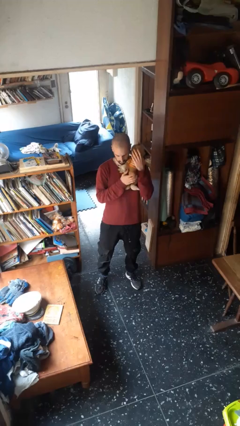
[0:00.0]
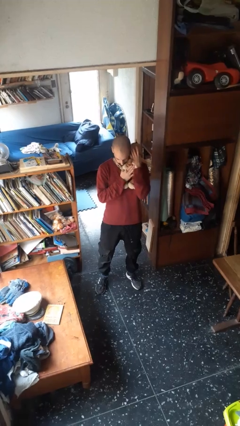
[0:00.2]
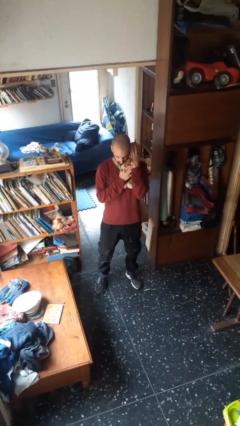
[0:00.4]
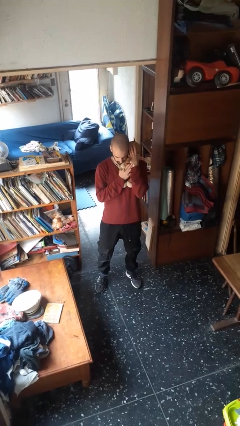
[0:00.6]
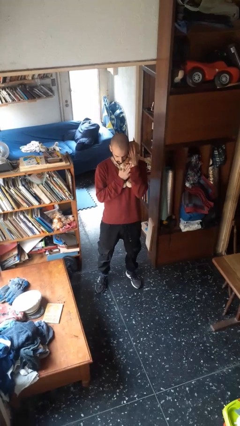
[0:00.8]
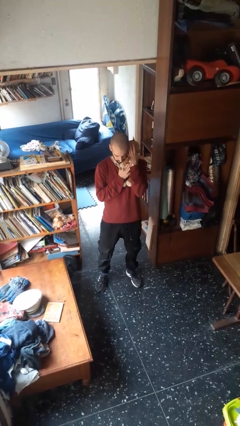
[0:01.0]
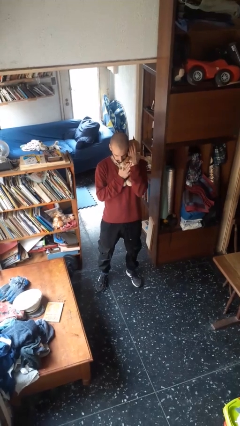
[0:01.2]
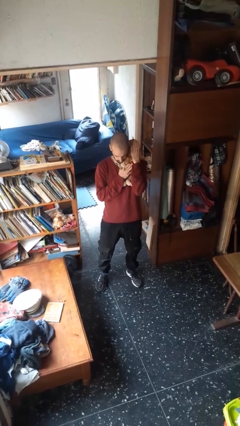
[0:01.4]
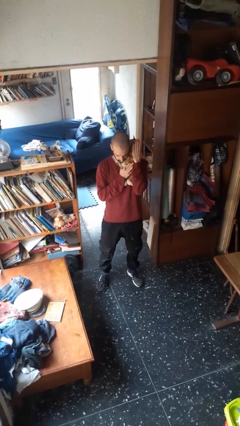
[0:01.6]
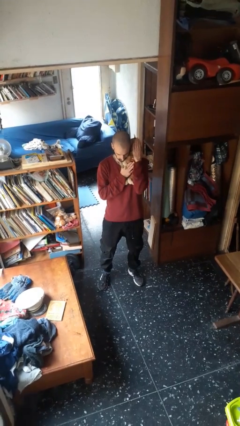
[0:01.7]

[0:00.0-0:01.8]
person hugs stuffed animal

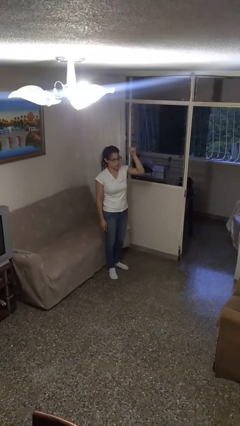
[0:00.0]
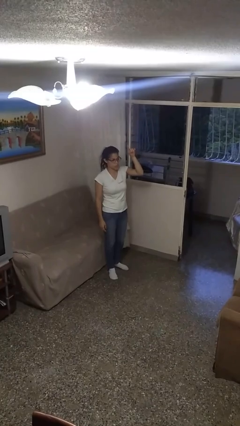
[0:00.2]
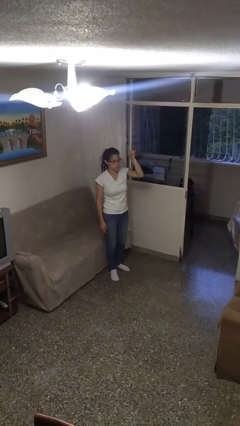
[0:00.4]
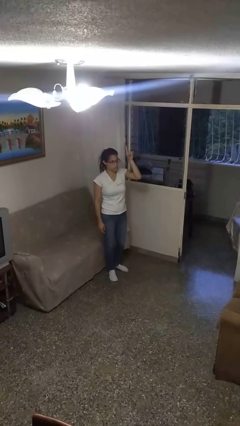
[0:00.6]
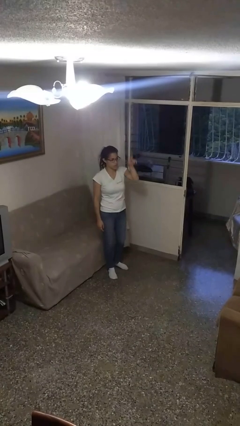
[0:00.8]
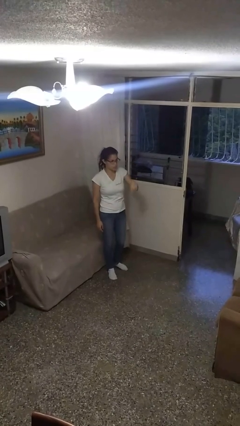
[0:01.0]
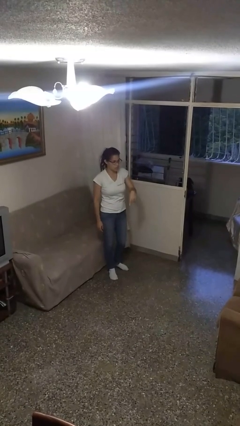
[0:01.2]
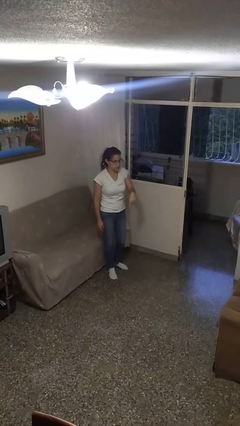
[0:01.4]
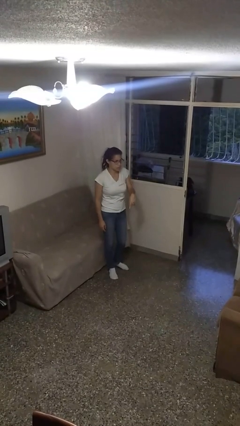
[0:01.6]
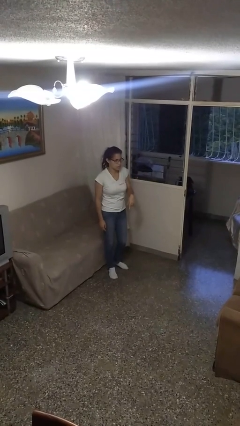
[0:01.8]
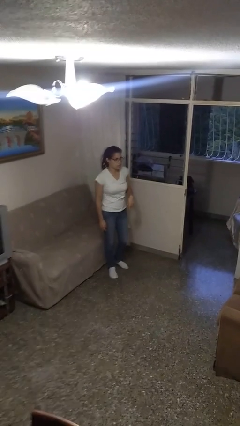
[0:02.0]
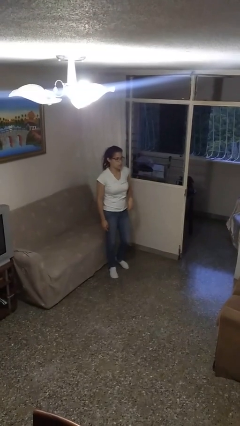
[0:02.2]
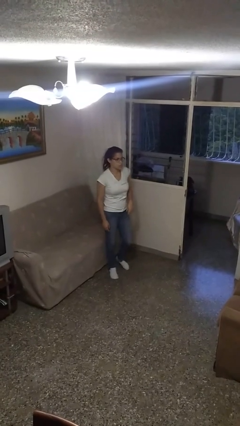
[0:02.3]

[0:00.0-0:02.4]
person gestures swipe down

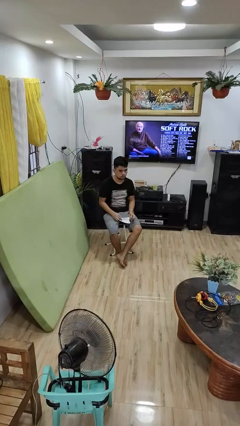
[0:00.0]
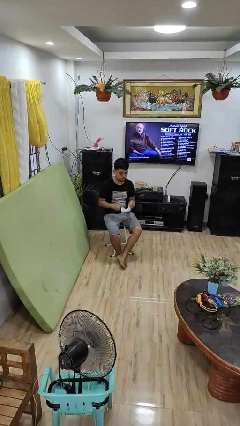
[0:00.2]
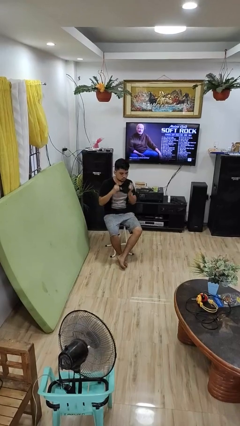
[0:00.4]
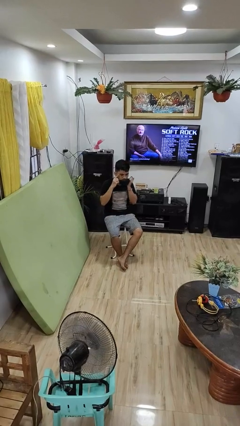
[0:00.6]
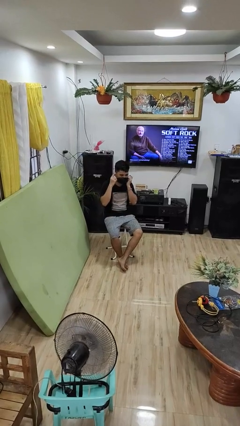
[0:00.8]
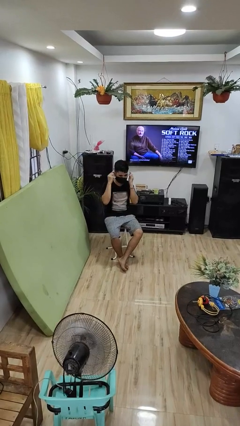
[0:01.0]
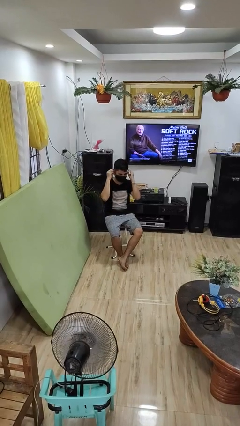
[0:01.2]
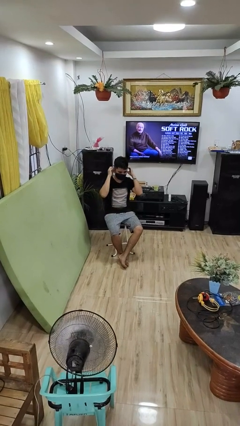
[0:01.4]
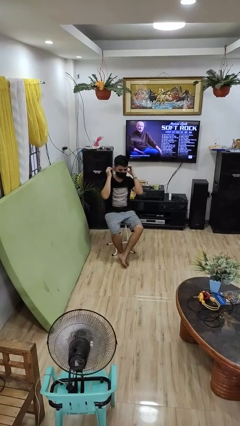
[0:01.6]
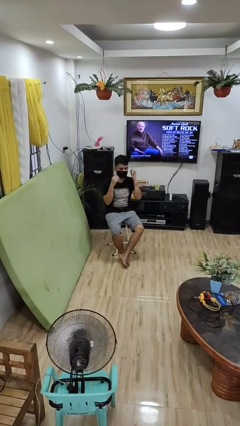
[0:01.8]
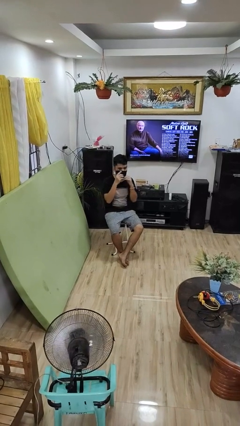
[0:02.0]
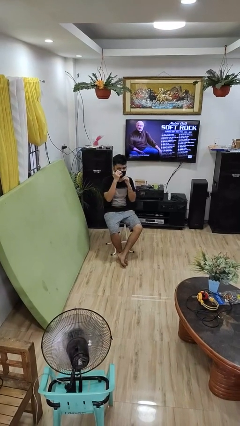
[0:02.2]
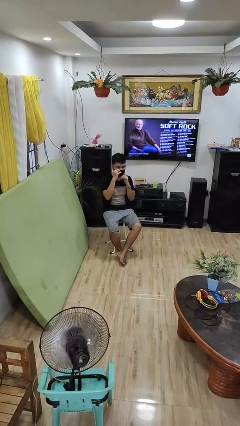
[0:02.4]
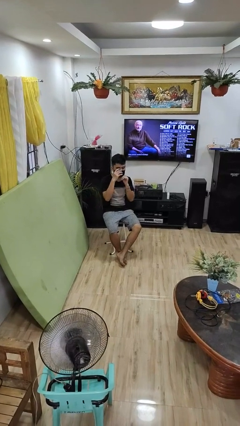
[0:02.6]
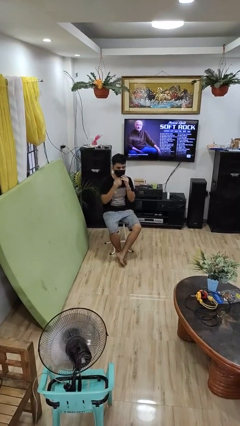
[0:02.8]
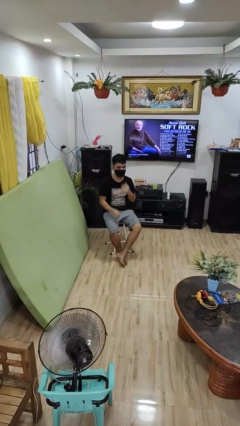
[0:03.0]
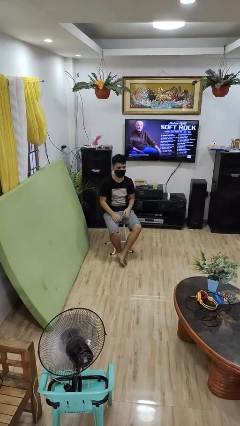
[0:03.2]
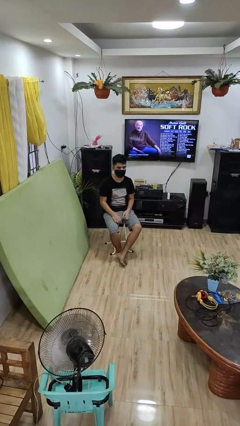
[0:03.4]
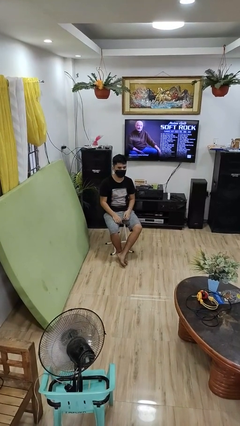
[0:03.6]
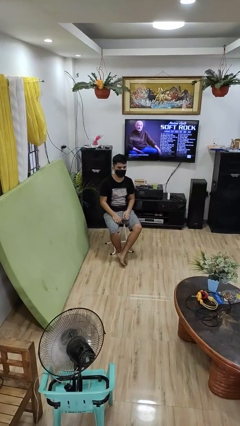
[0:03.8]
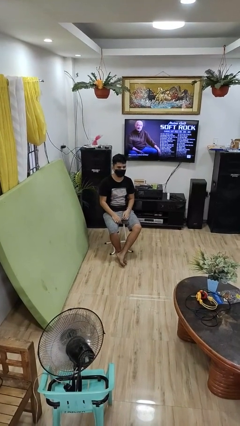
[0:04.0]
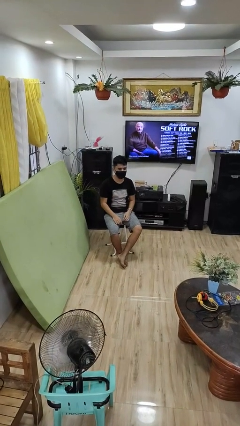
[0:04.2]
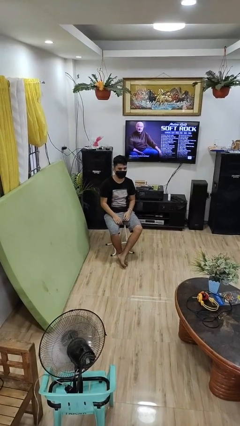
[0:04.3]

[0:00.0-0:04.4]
person puts on facemask

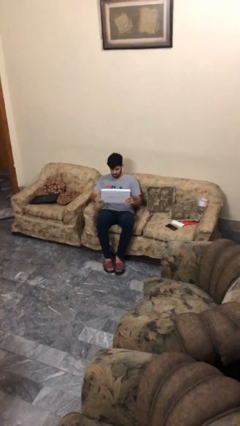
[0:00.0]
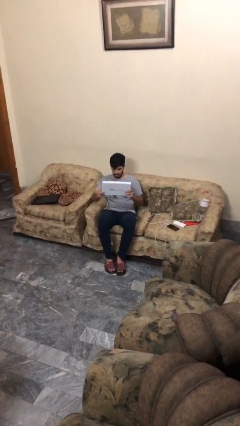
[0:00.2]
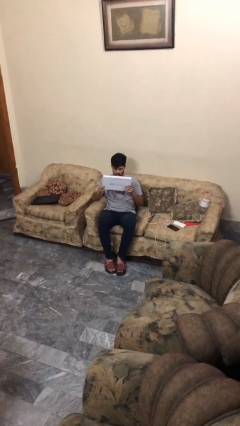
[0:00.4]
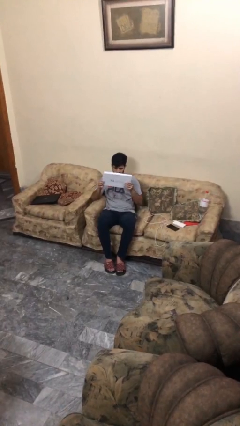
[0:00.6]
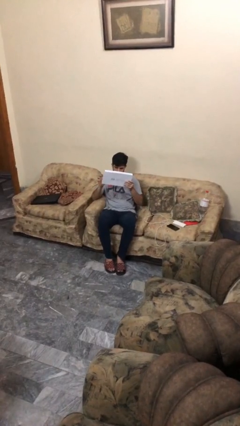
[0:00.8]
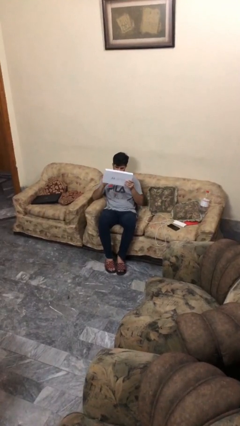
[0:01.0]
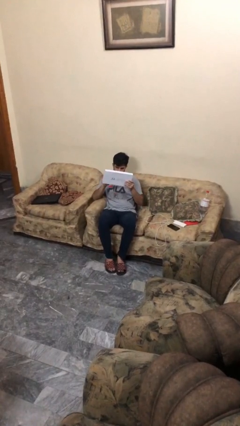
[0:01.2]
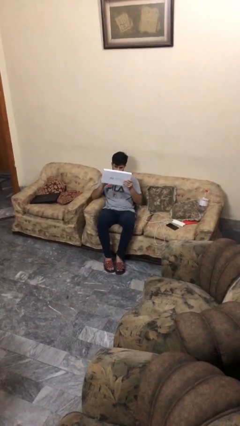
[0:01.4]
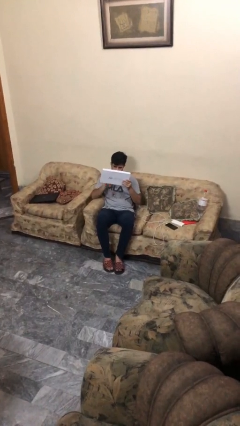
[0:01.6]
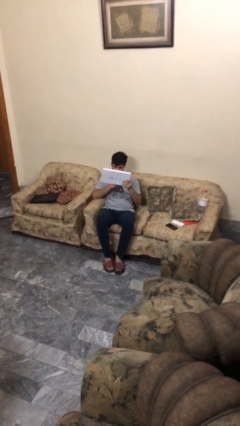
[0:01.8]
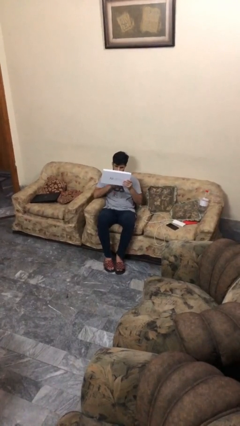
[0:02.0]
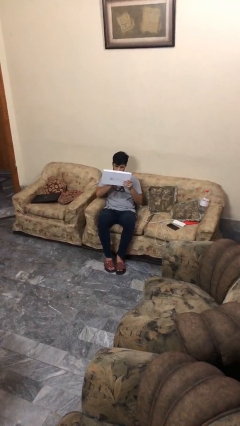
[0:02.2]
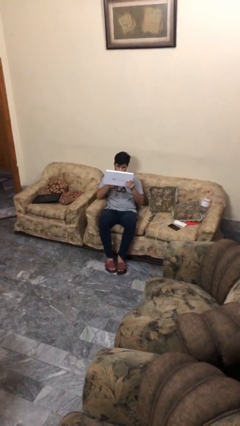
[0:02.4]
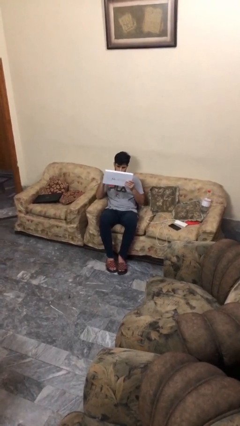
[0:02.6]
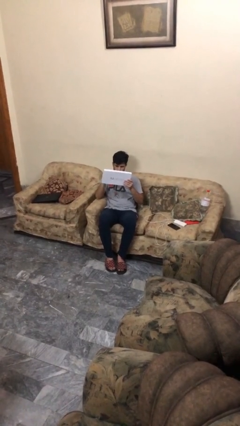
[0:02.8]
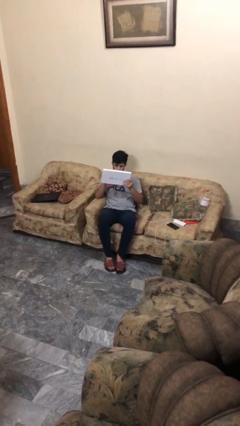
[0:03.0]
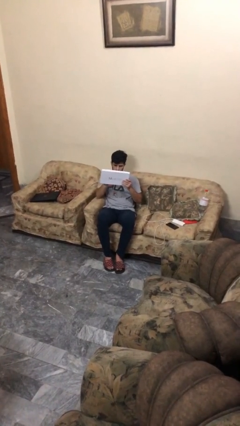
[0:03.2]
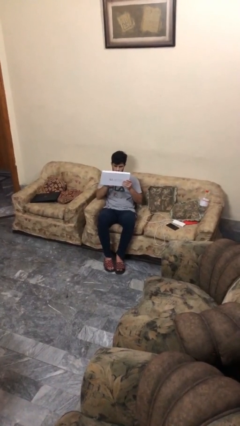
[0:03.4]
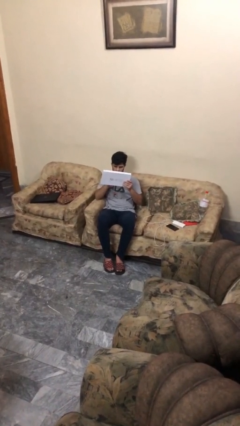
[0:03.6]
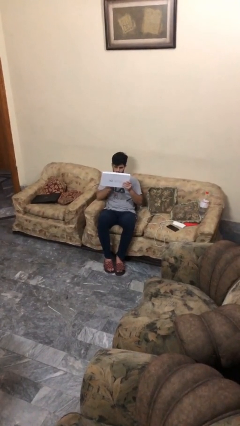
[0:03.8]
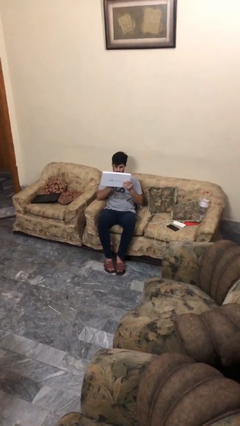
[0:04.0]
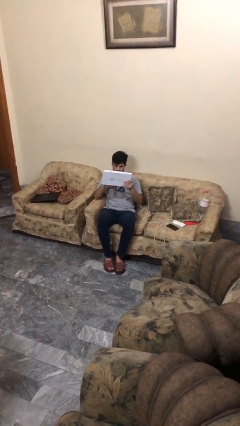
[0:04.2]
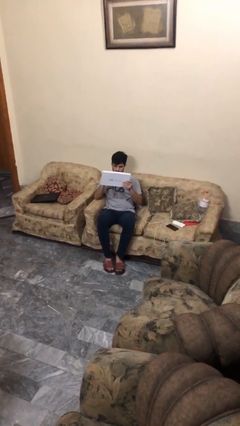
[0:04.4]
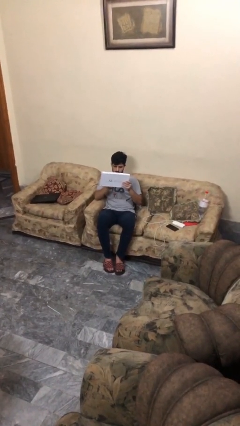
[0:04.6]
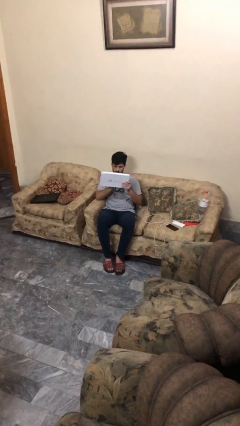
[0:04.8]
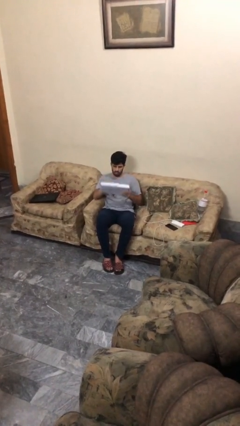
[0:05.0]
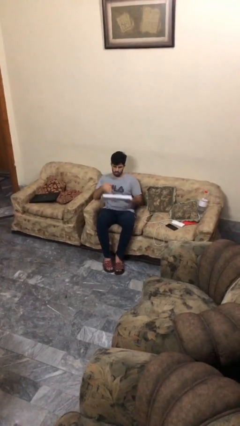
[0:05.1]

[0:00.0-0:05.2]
person interacts with tablet

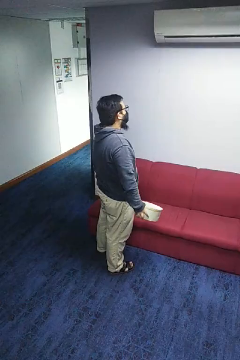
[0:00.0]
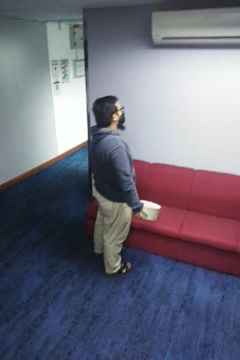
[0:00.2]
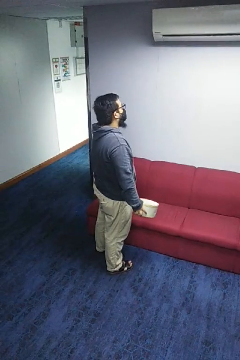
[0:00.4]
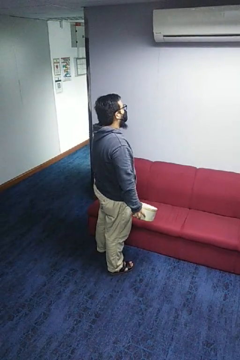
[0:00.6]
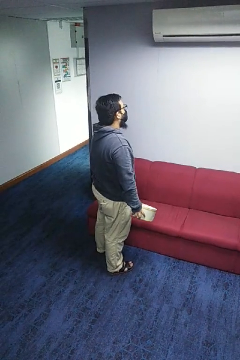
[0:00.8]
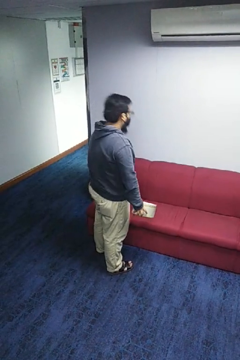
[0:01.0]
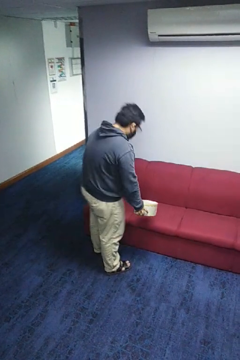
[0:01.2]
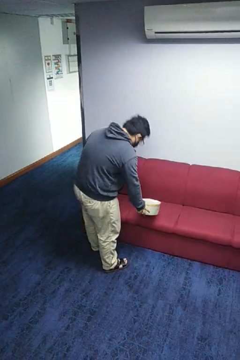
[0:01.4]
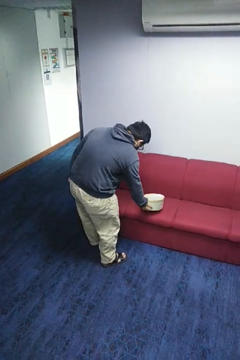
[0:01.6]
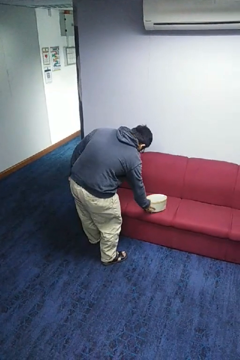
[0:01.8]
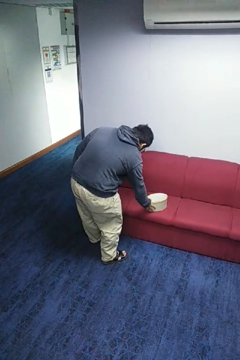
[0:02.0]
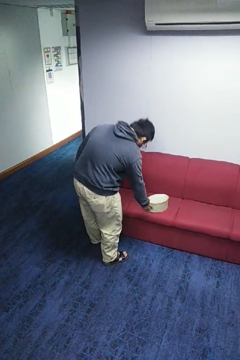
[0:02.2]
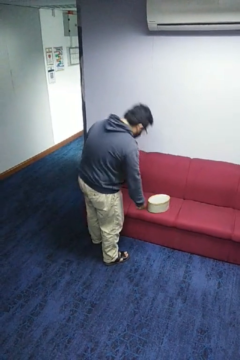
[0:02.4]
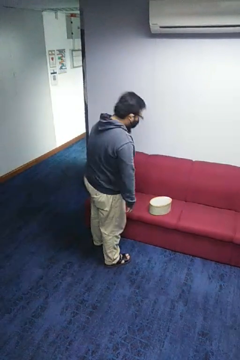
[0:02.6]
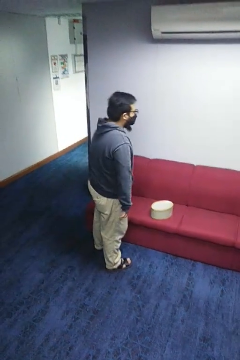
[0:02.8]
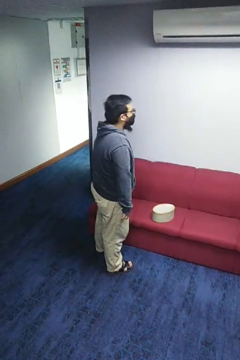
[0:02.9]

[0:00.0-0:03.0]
person puts down object on couch

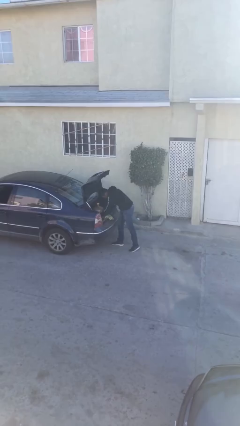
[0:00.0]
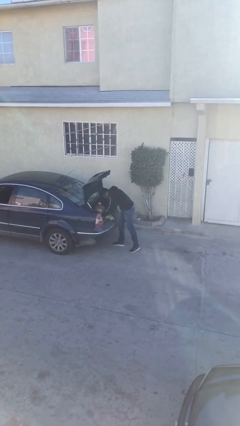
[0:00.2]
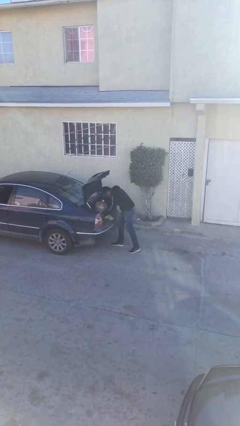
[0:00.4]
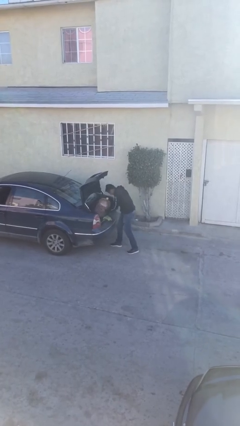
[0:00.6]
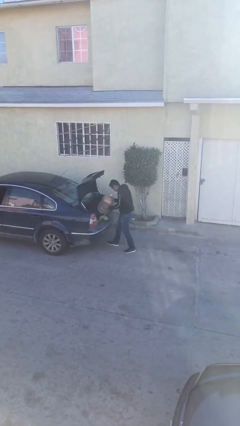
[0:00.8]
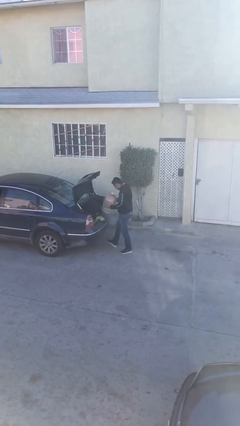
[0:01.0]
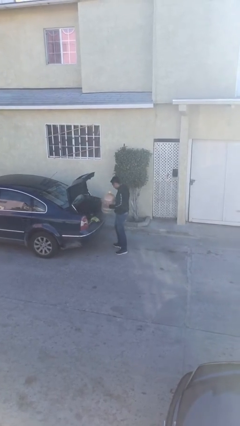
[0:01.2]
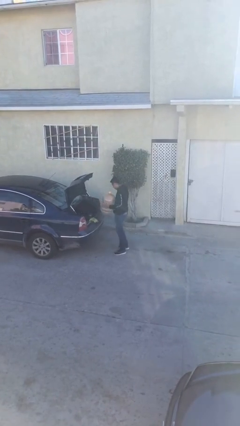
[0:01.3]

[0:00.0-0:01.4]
person unloads car
